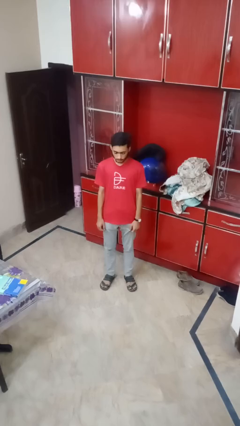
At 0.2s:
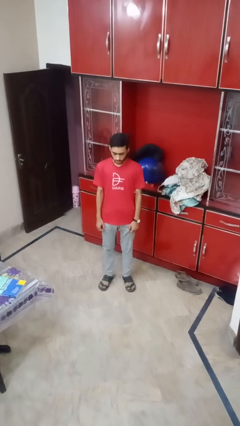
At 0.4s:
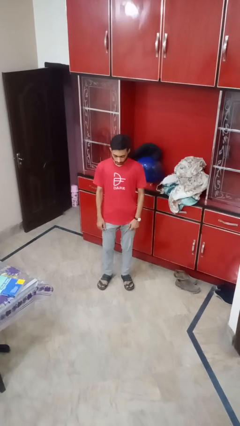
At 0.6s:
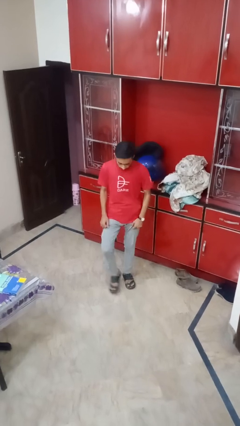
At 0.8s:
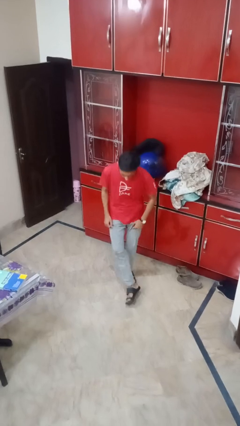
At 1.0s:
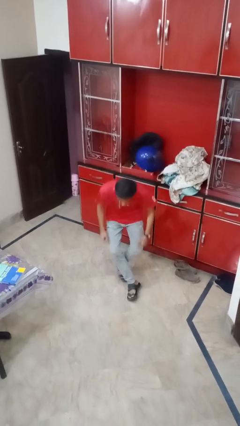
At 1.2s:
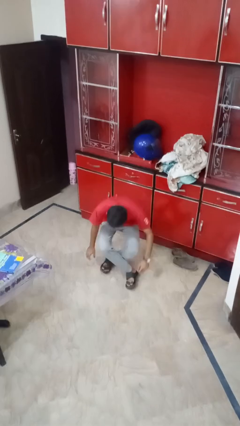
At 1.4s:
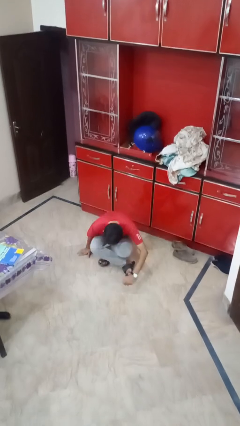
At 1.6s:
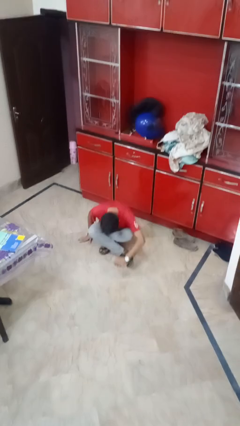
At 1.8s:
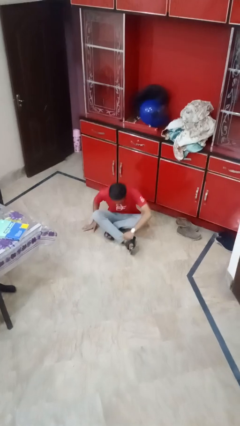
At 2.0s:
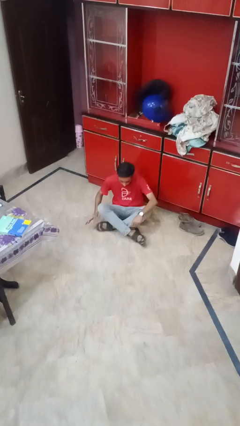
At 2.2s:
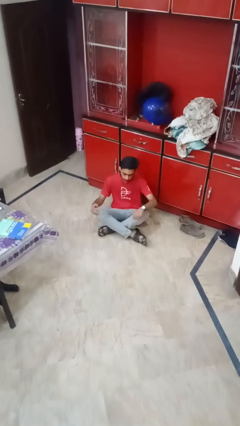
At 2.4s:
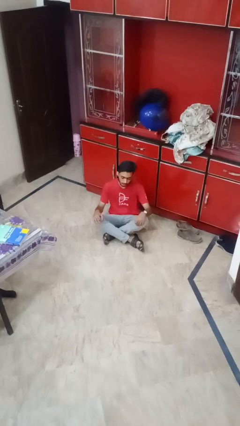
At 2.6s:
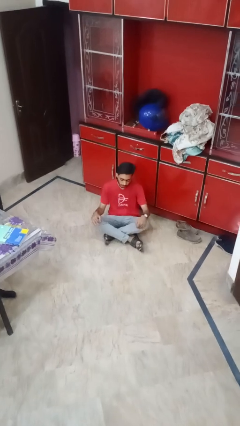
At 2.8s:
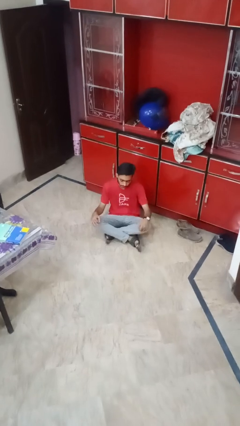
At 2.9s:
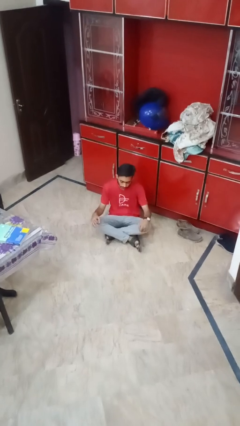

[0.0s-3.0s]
person sits crisscross

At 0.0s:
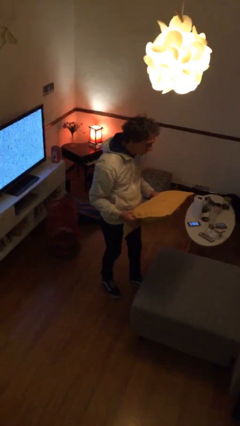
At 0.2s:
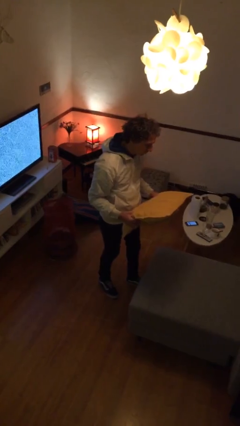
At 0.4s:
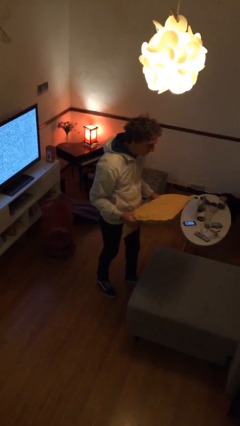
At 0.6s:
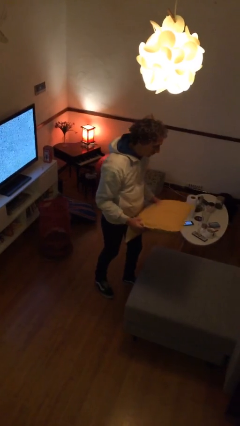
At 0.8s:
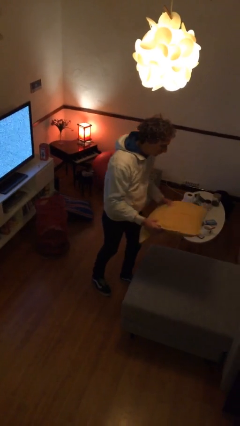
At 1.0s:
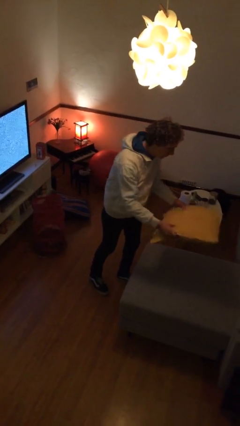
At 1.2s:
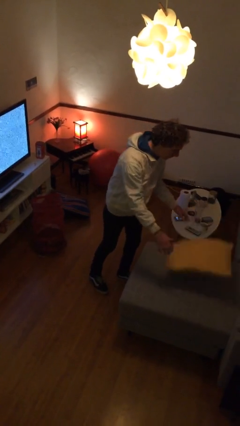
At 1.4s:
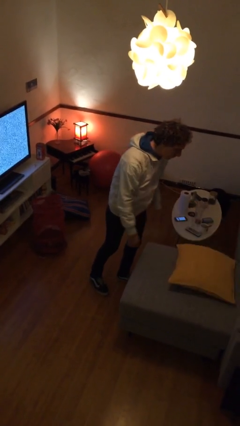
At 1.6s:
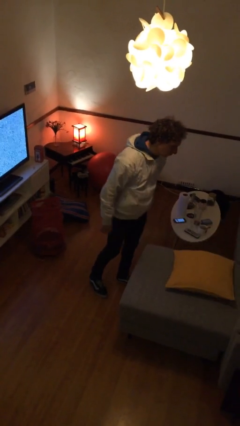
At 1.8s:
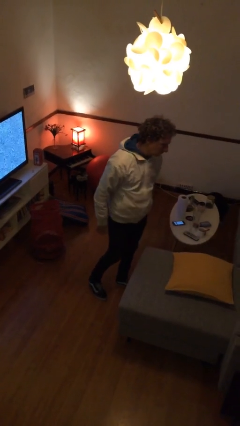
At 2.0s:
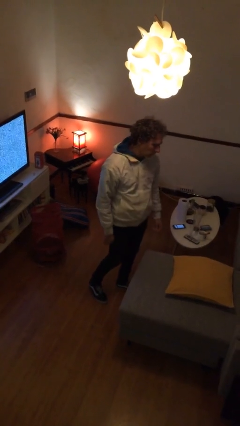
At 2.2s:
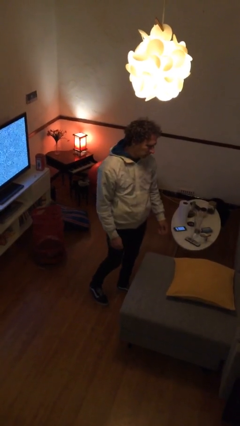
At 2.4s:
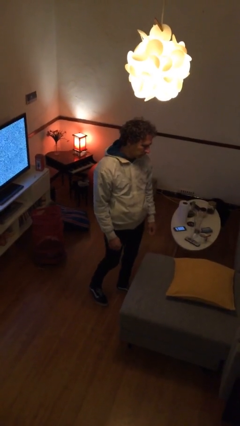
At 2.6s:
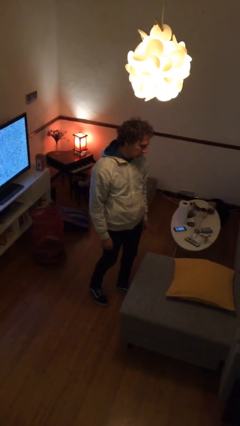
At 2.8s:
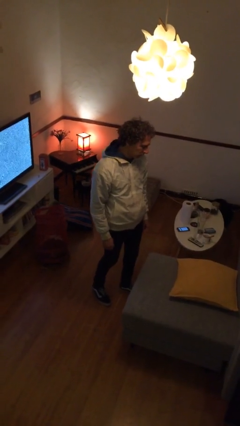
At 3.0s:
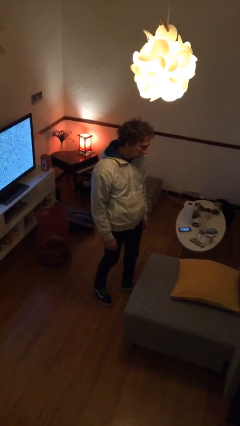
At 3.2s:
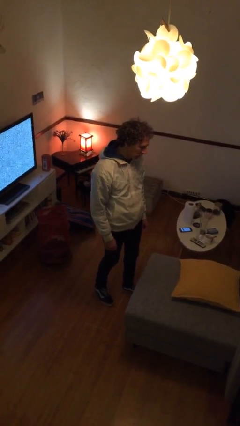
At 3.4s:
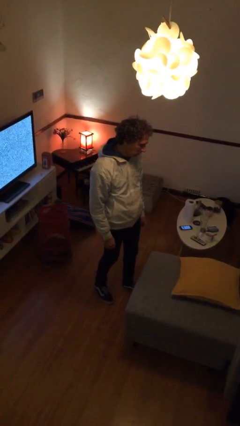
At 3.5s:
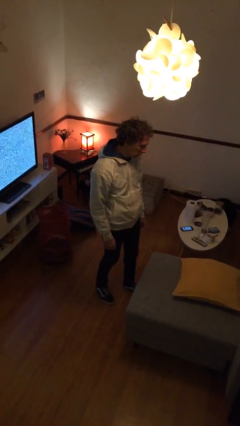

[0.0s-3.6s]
person puts down object on couch

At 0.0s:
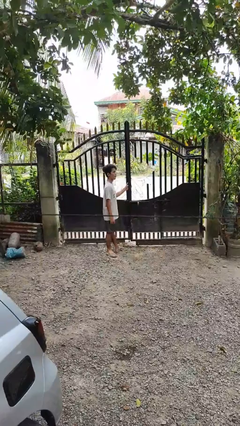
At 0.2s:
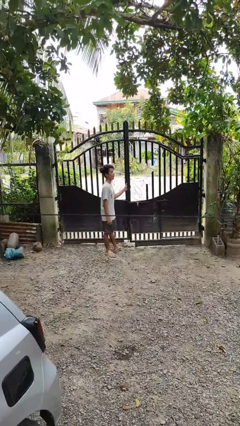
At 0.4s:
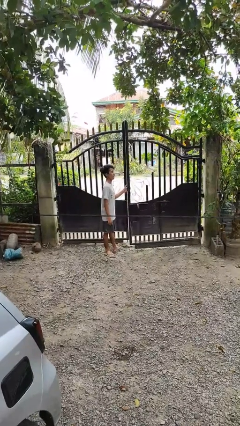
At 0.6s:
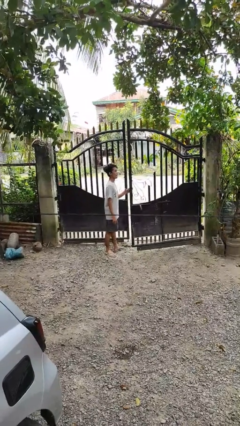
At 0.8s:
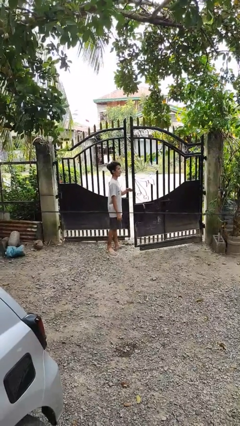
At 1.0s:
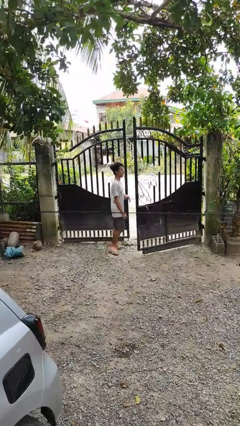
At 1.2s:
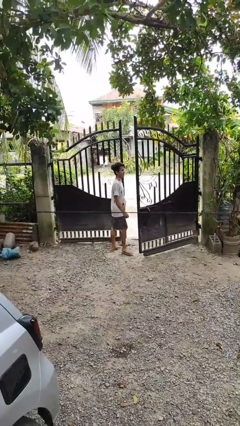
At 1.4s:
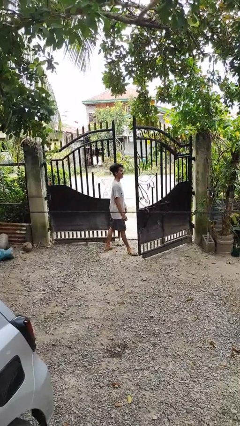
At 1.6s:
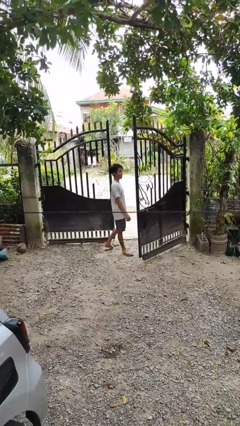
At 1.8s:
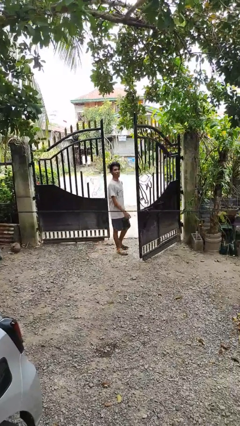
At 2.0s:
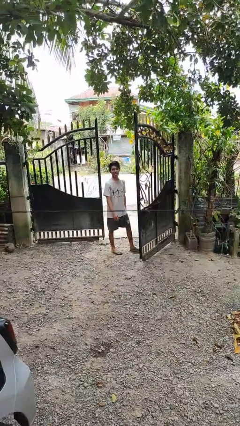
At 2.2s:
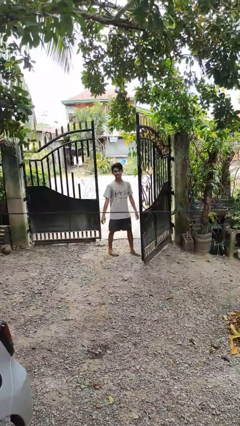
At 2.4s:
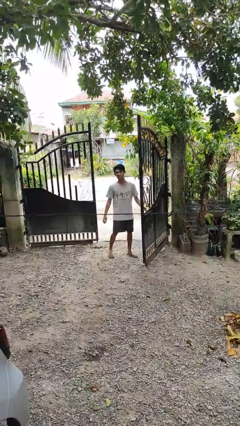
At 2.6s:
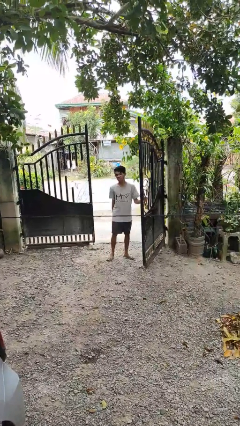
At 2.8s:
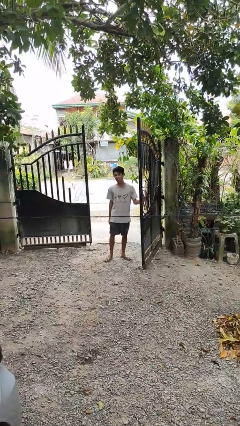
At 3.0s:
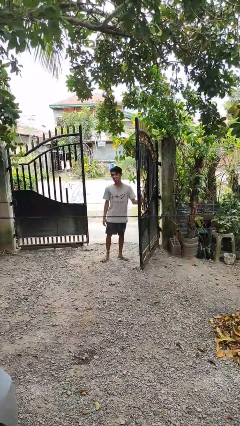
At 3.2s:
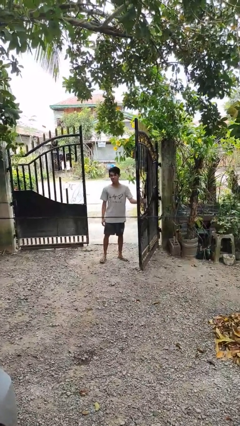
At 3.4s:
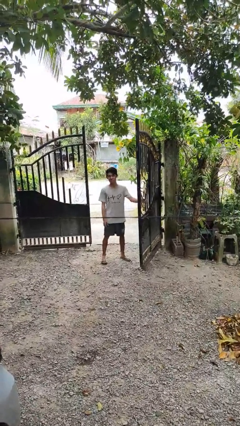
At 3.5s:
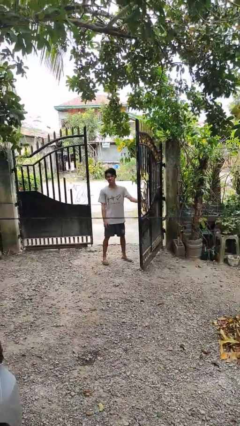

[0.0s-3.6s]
person opens gate

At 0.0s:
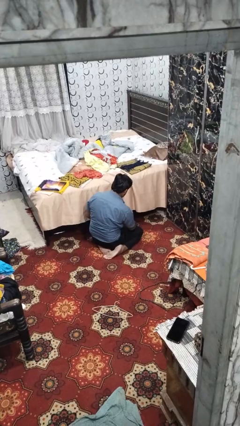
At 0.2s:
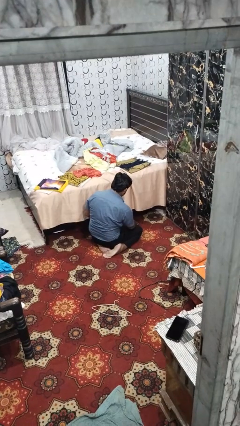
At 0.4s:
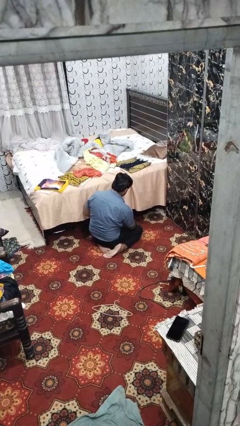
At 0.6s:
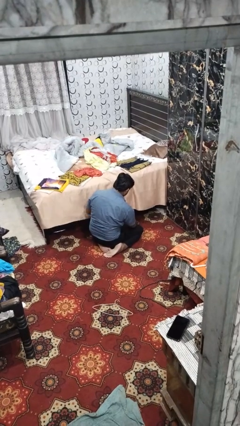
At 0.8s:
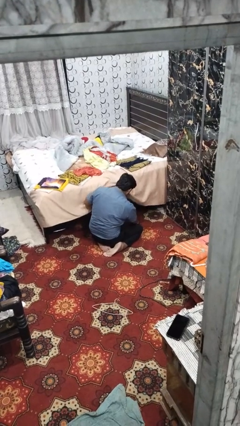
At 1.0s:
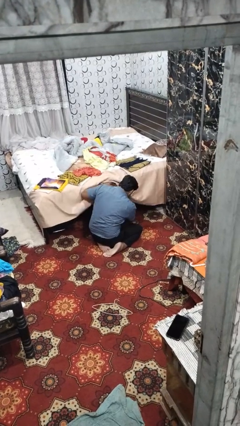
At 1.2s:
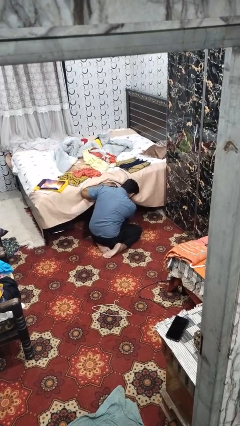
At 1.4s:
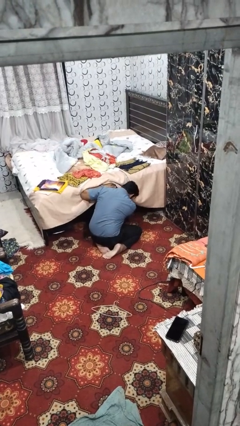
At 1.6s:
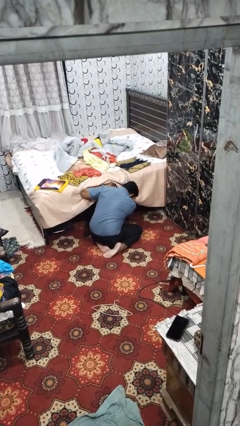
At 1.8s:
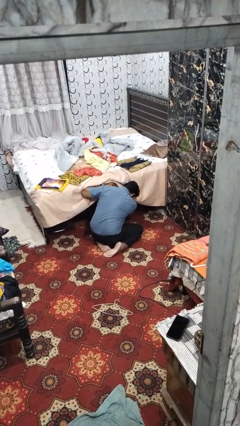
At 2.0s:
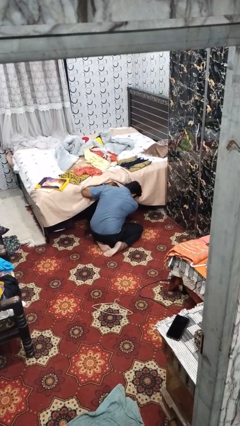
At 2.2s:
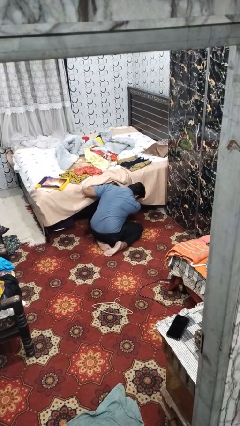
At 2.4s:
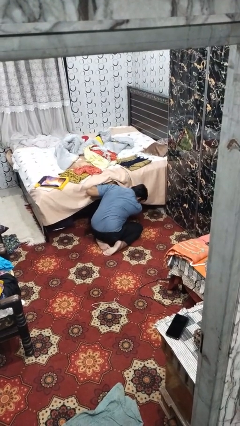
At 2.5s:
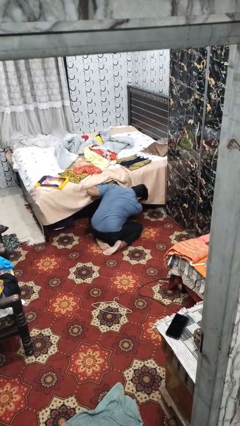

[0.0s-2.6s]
person searches under bed

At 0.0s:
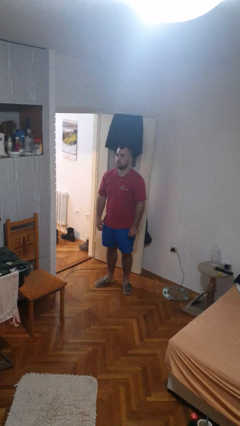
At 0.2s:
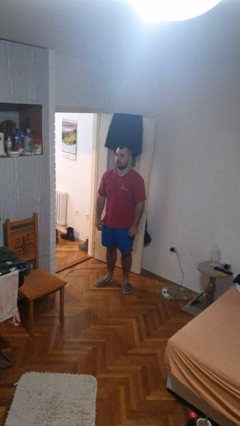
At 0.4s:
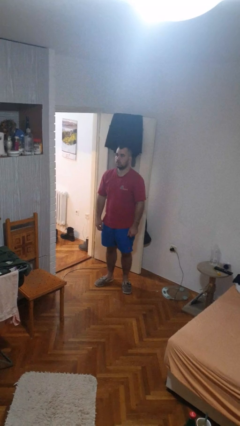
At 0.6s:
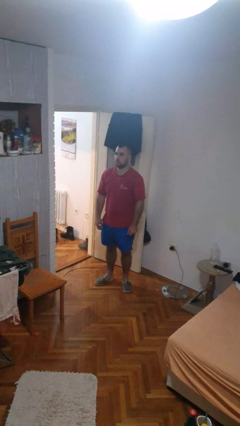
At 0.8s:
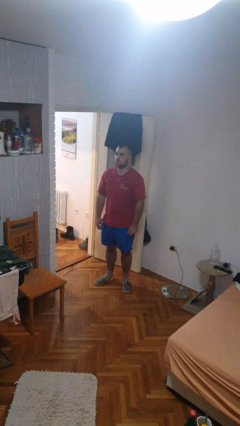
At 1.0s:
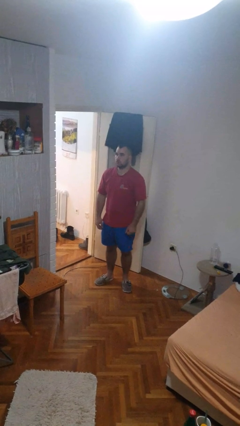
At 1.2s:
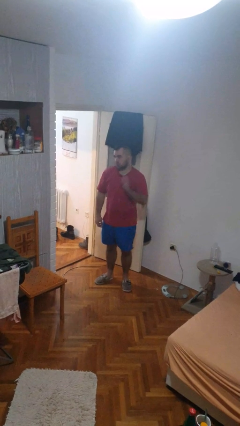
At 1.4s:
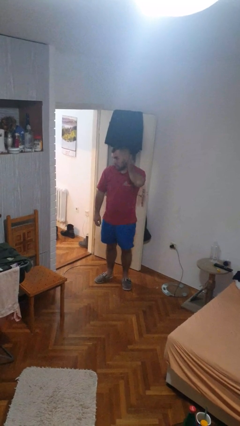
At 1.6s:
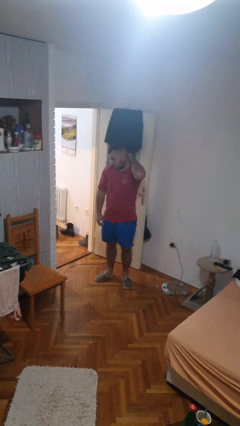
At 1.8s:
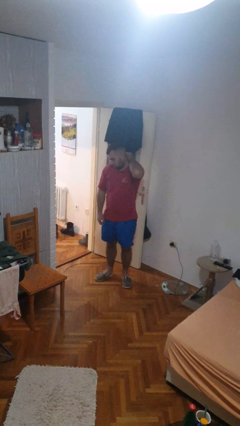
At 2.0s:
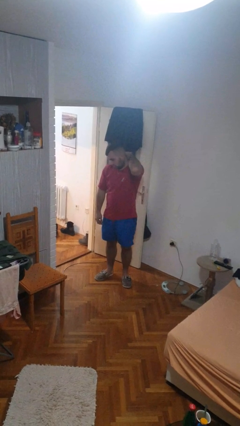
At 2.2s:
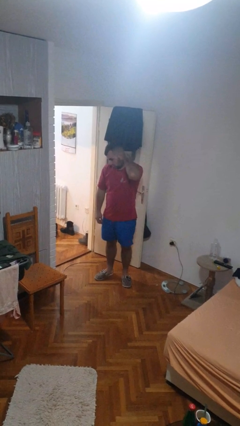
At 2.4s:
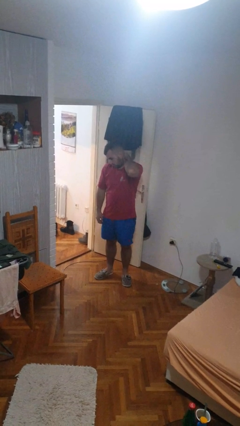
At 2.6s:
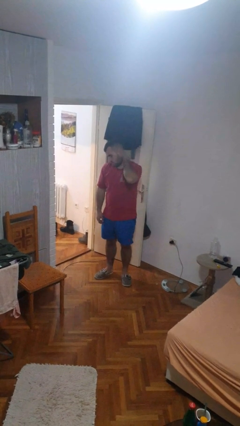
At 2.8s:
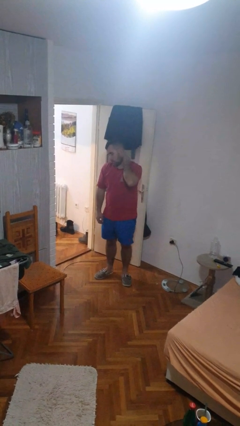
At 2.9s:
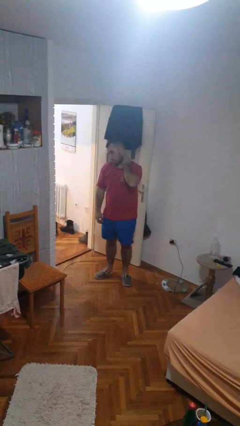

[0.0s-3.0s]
person rubs neck

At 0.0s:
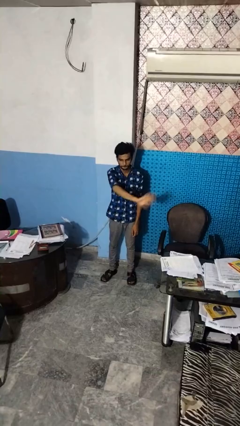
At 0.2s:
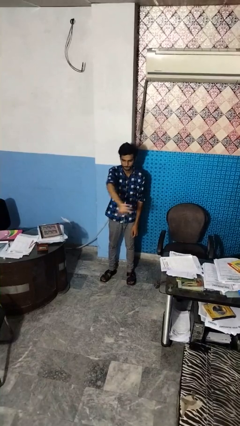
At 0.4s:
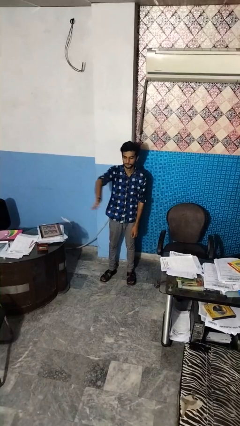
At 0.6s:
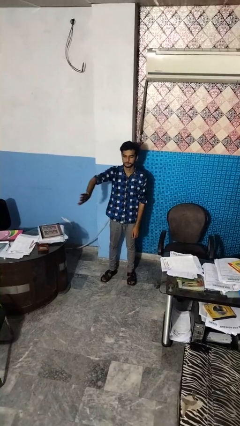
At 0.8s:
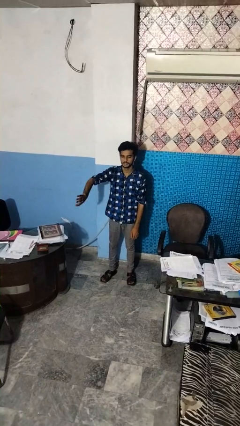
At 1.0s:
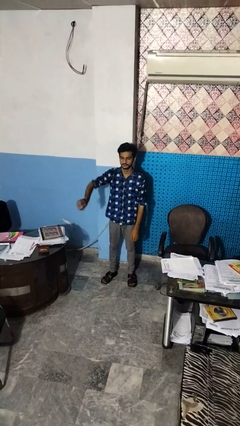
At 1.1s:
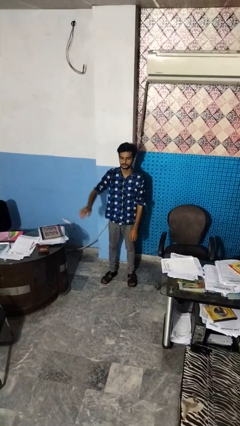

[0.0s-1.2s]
person gestures swipe right

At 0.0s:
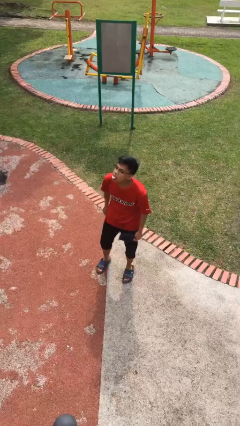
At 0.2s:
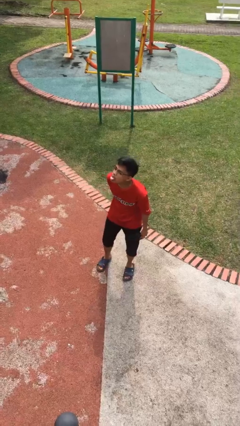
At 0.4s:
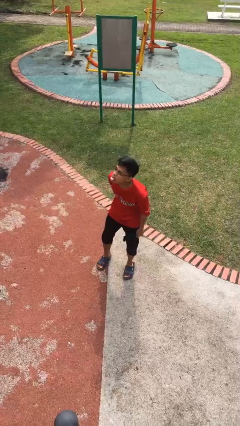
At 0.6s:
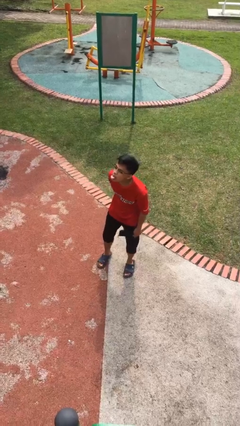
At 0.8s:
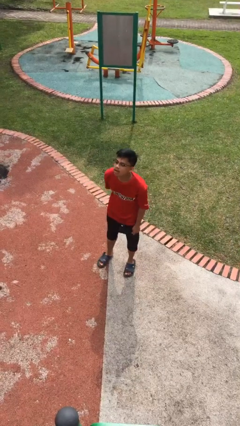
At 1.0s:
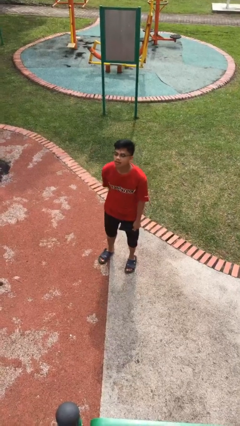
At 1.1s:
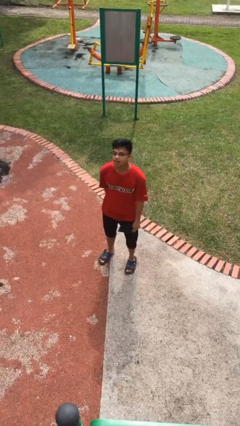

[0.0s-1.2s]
person sticks out tongue
